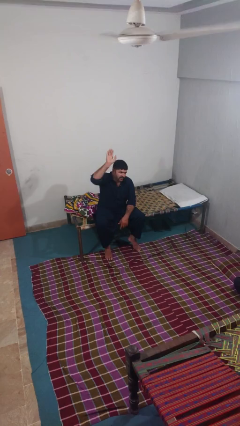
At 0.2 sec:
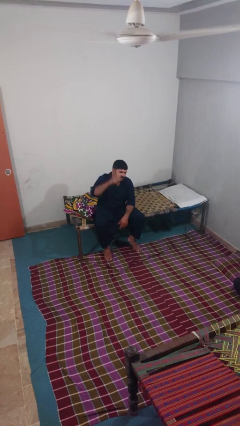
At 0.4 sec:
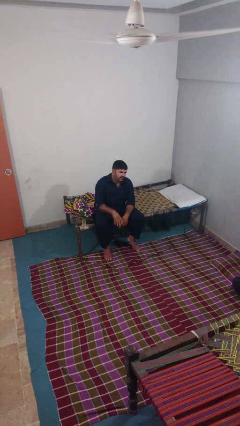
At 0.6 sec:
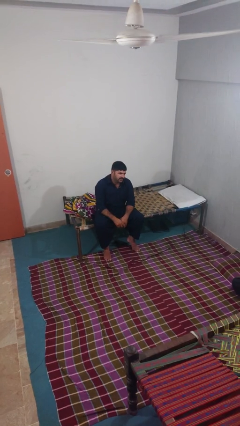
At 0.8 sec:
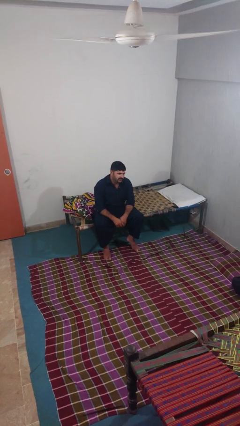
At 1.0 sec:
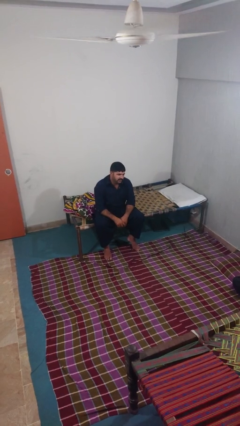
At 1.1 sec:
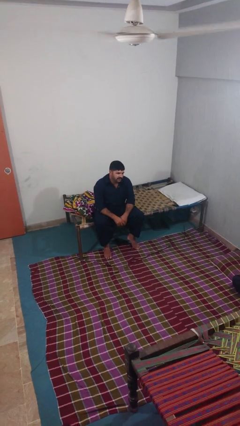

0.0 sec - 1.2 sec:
person gestures swipe down

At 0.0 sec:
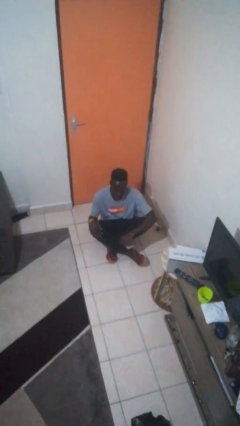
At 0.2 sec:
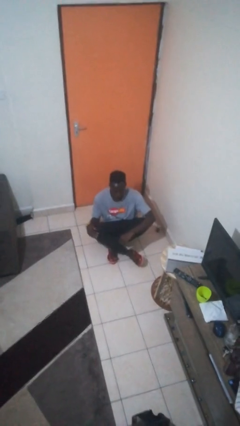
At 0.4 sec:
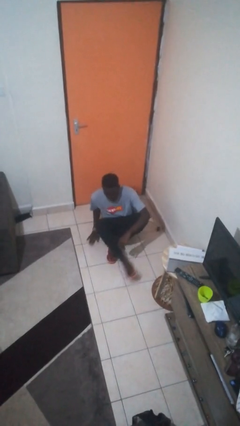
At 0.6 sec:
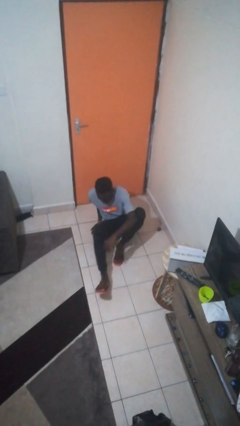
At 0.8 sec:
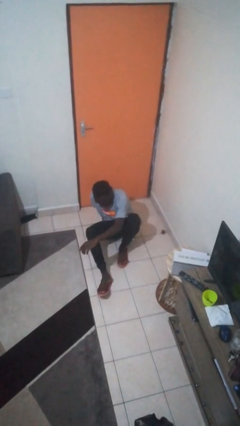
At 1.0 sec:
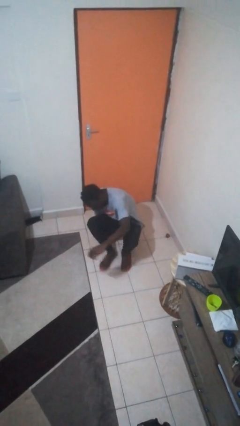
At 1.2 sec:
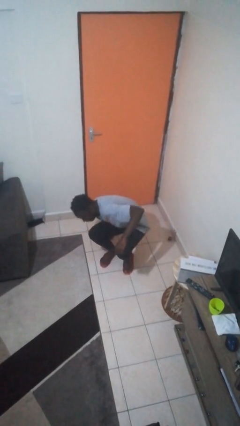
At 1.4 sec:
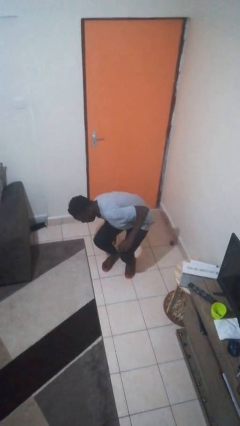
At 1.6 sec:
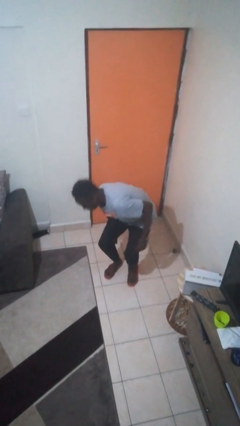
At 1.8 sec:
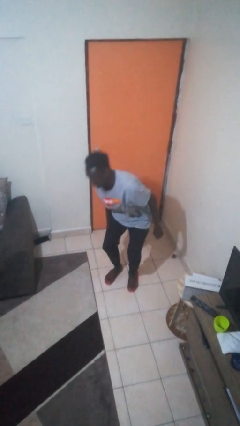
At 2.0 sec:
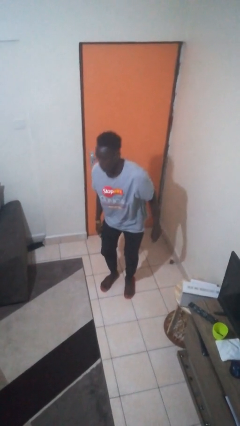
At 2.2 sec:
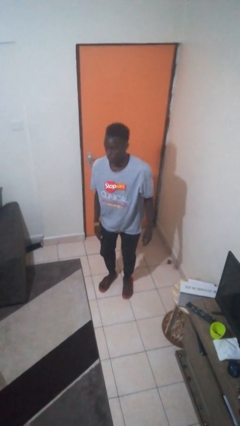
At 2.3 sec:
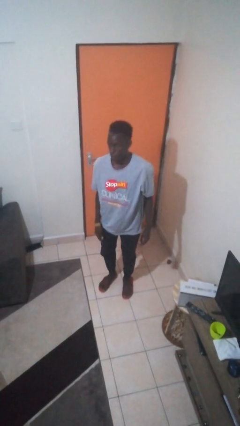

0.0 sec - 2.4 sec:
person stands up from floor

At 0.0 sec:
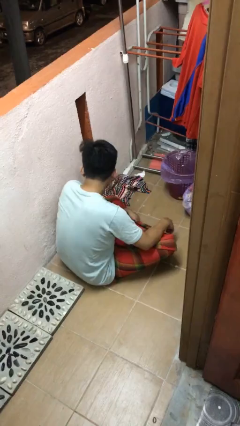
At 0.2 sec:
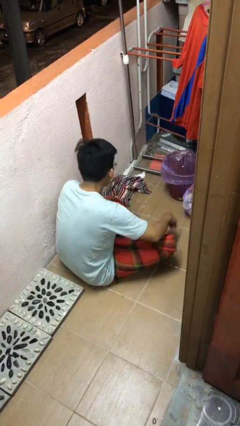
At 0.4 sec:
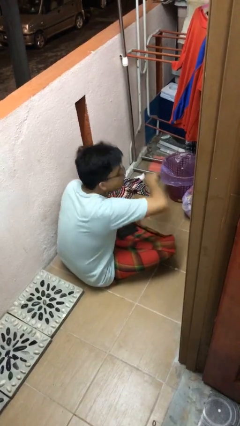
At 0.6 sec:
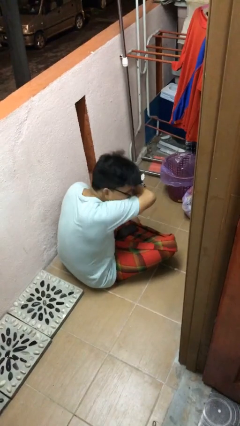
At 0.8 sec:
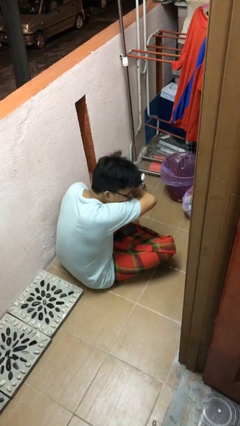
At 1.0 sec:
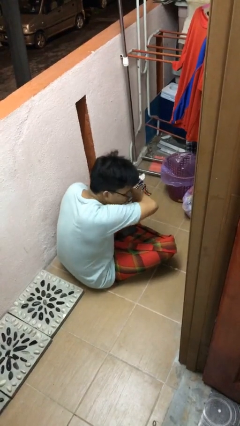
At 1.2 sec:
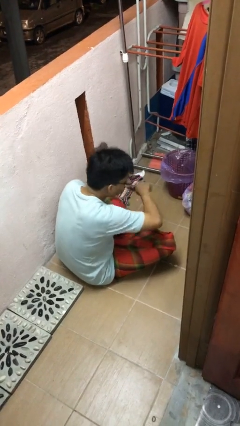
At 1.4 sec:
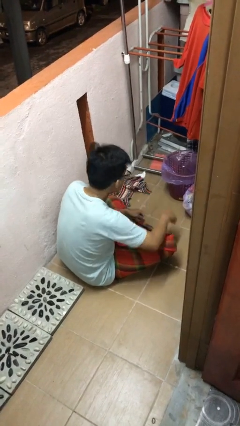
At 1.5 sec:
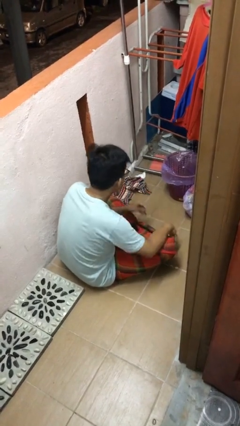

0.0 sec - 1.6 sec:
person sneezes into arm

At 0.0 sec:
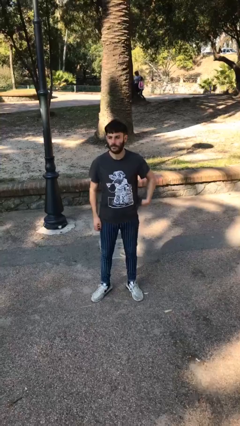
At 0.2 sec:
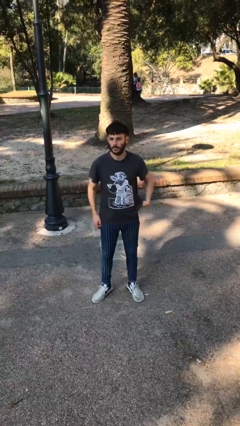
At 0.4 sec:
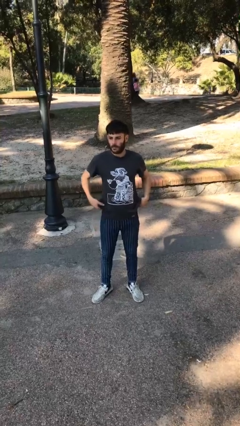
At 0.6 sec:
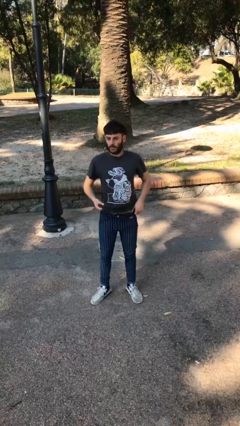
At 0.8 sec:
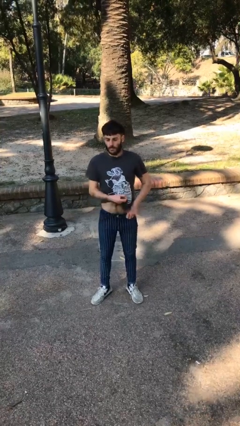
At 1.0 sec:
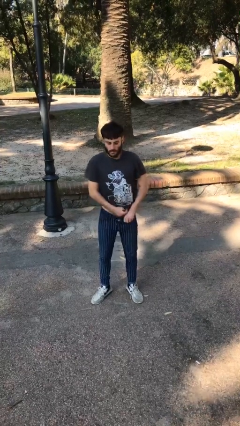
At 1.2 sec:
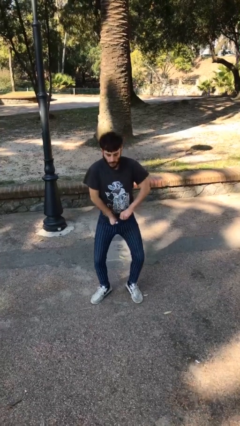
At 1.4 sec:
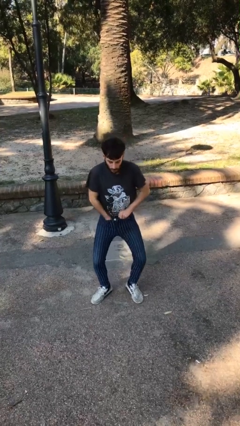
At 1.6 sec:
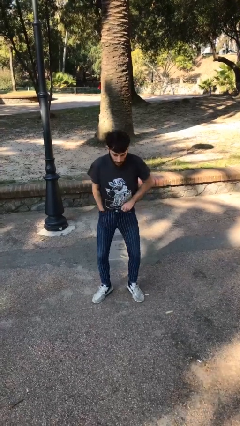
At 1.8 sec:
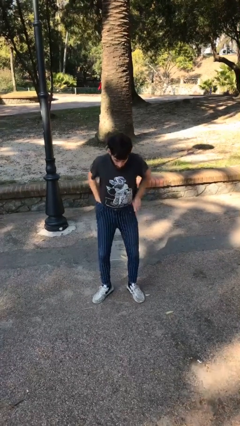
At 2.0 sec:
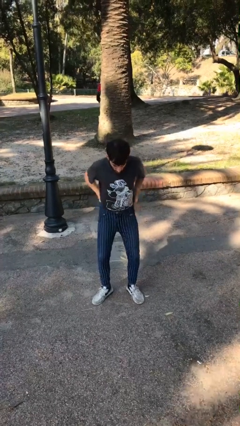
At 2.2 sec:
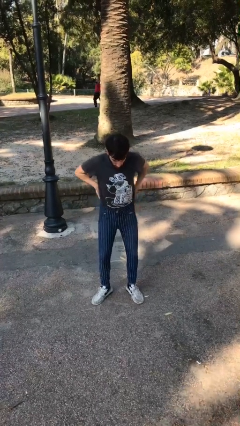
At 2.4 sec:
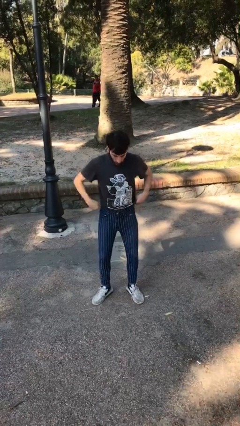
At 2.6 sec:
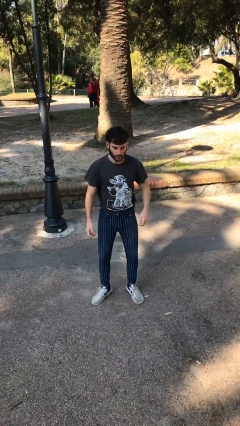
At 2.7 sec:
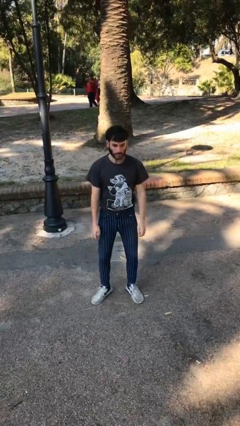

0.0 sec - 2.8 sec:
person tucks in shirt

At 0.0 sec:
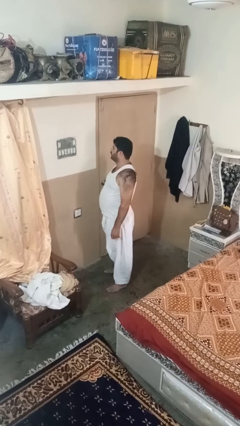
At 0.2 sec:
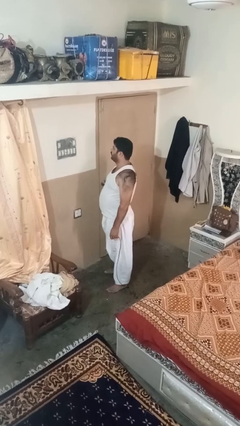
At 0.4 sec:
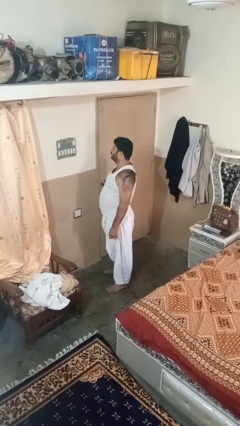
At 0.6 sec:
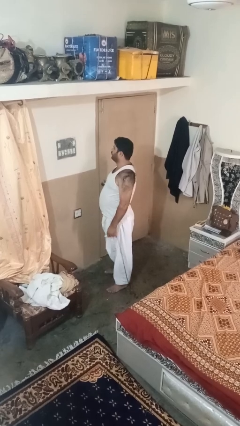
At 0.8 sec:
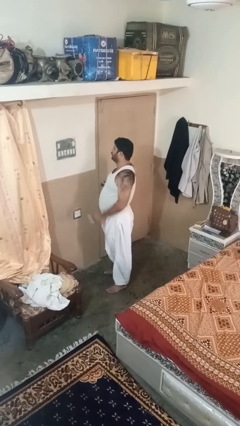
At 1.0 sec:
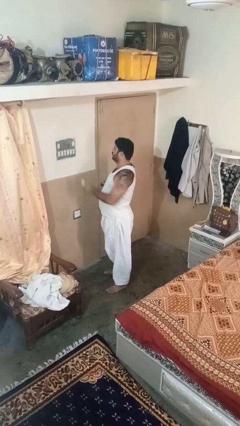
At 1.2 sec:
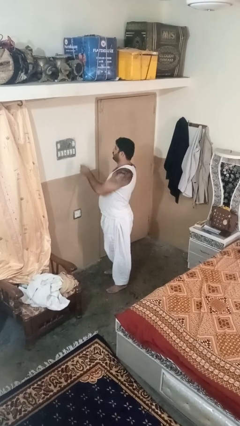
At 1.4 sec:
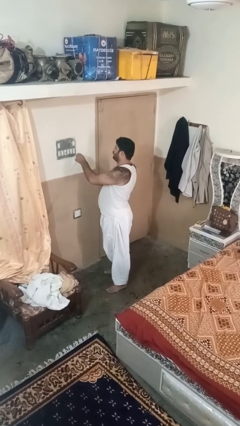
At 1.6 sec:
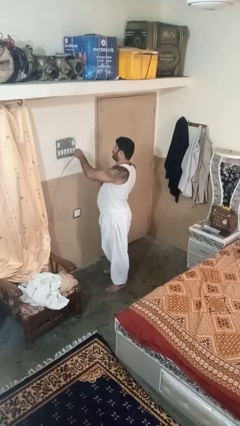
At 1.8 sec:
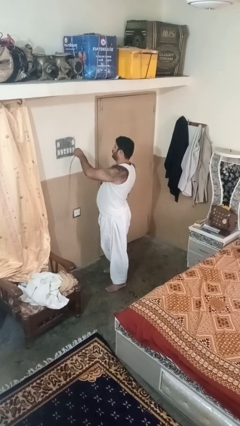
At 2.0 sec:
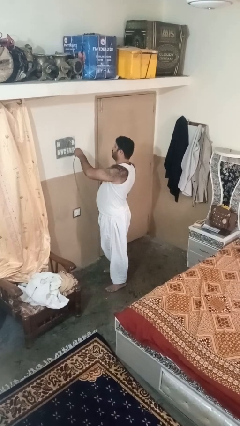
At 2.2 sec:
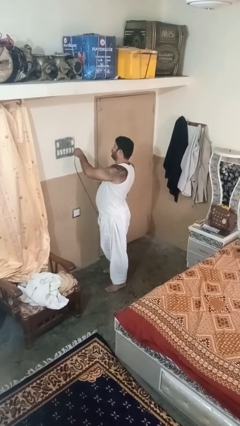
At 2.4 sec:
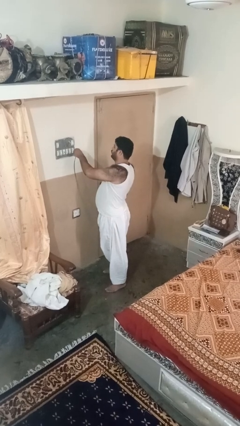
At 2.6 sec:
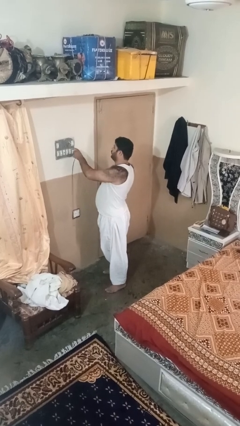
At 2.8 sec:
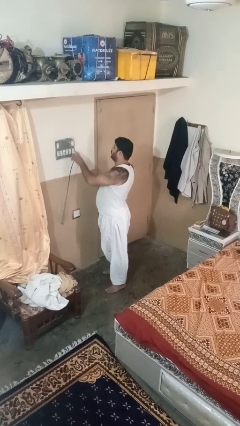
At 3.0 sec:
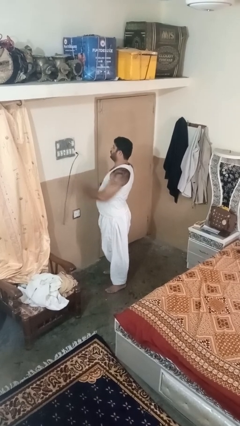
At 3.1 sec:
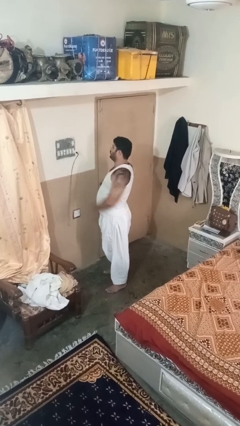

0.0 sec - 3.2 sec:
person plugs into electrical socket

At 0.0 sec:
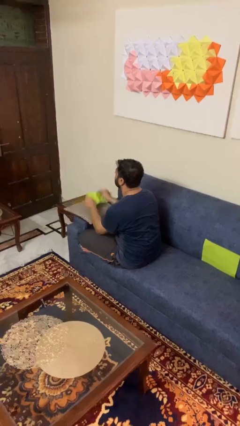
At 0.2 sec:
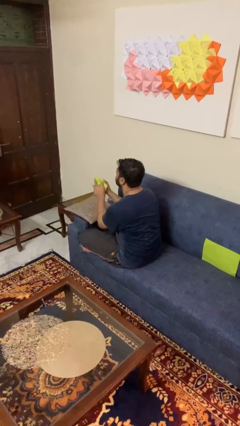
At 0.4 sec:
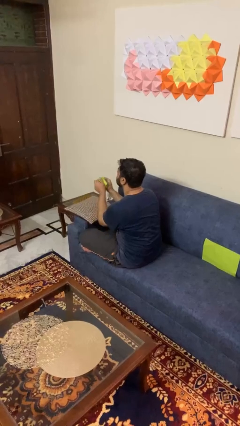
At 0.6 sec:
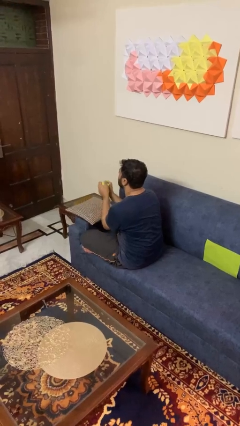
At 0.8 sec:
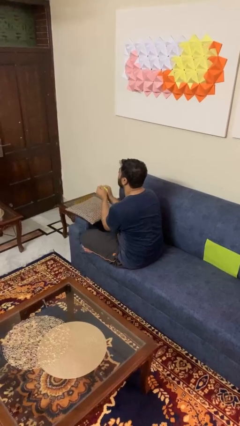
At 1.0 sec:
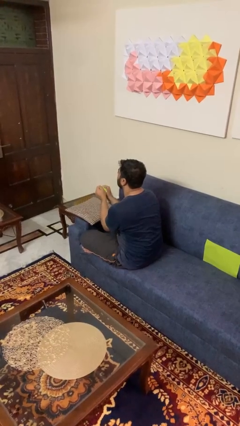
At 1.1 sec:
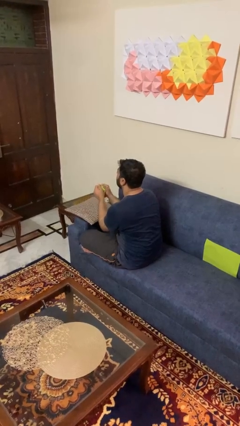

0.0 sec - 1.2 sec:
person crumples paper

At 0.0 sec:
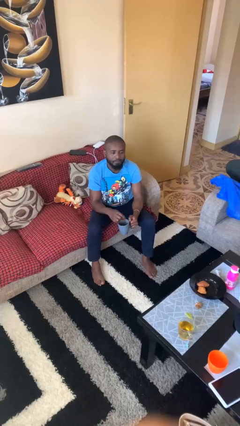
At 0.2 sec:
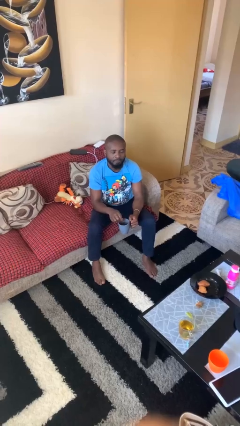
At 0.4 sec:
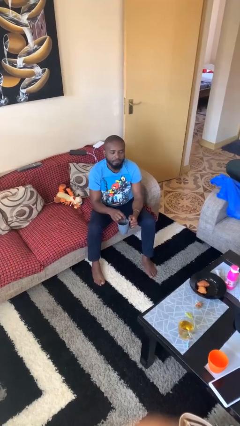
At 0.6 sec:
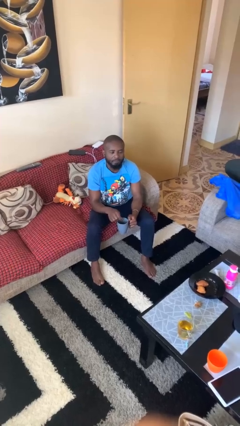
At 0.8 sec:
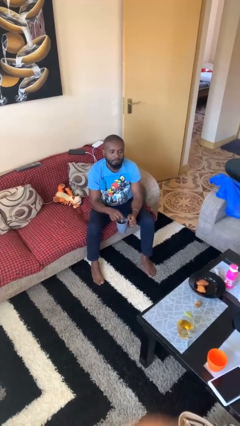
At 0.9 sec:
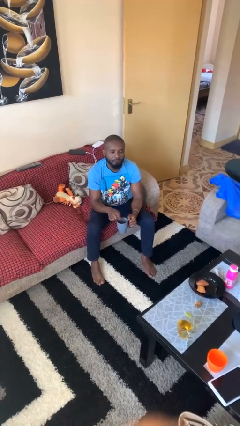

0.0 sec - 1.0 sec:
person stirs mug

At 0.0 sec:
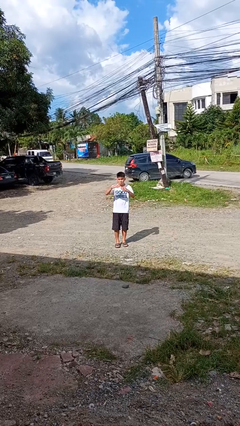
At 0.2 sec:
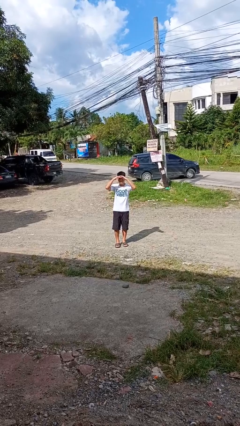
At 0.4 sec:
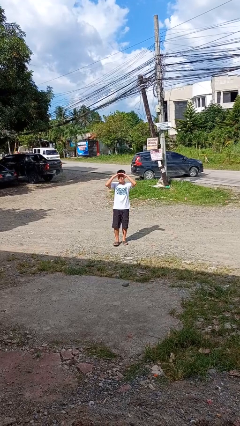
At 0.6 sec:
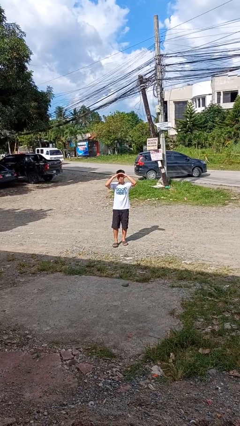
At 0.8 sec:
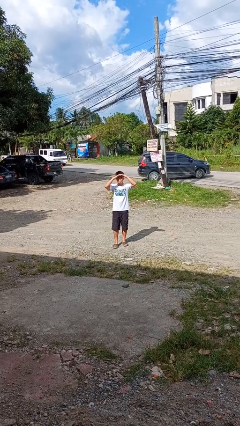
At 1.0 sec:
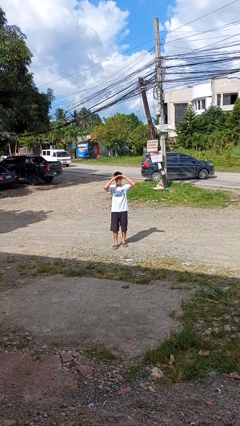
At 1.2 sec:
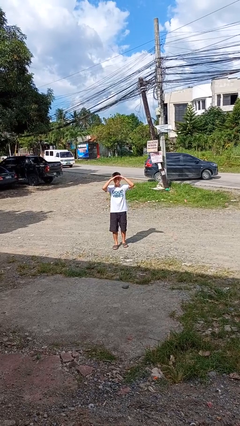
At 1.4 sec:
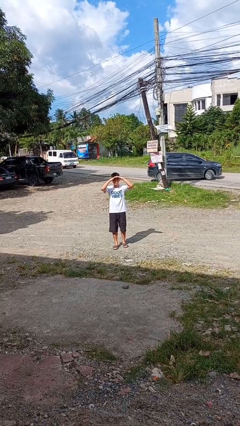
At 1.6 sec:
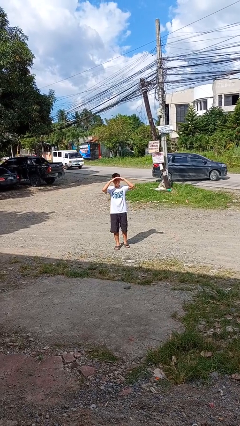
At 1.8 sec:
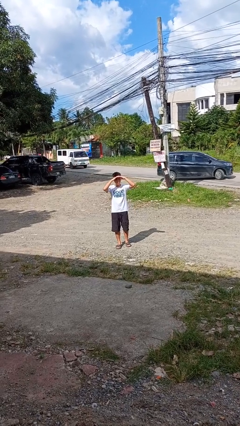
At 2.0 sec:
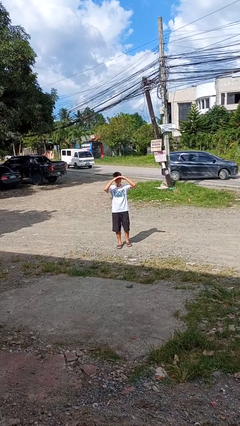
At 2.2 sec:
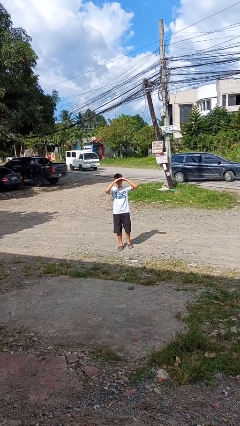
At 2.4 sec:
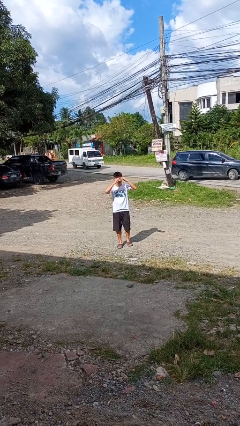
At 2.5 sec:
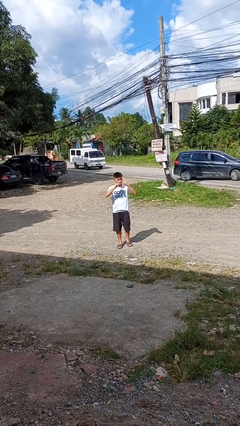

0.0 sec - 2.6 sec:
person shades eyes

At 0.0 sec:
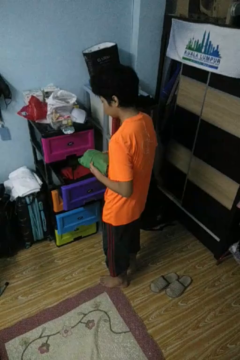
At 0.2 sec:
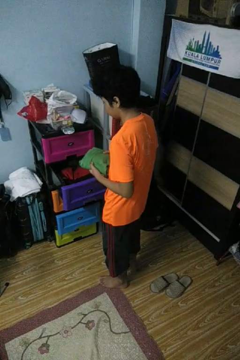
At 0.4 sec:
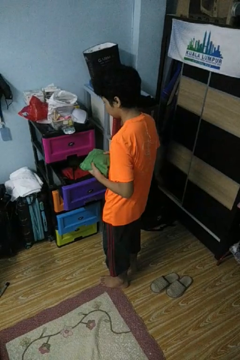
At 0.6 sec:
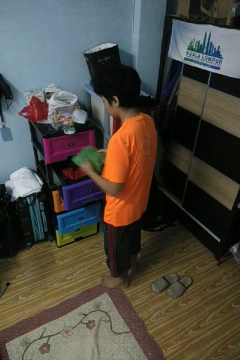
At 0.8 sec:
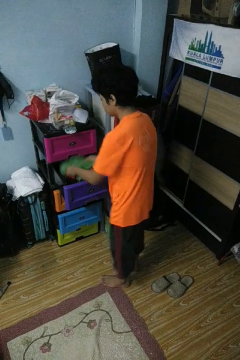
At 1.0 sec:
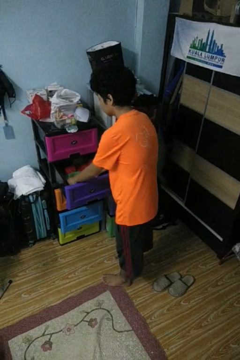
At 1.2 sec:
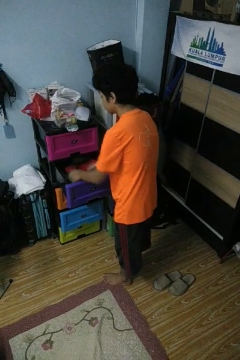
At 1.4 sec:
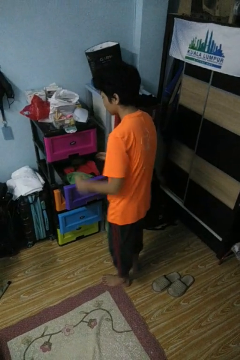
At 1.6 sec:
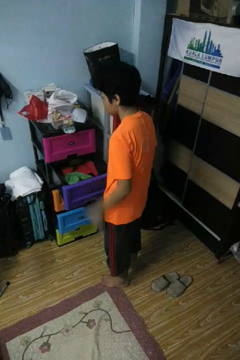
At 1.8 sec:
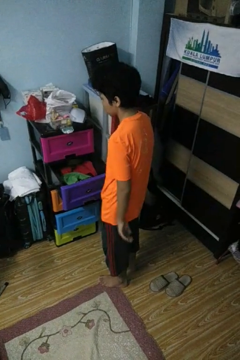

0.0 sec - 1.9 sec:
person puts clothes into dresser
